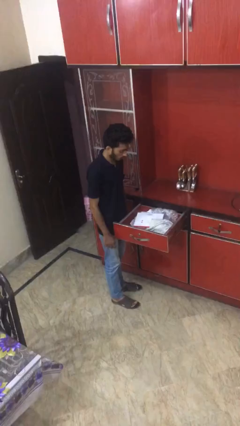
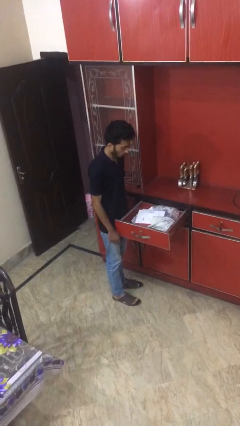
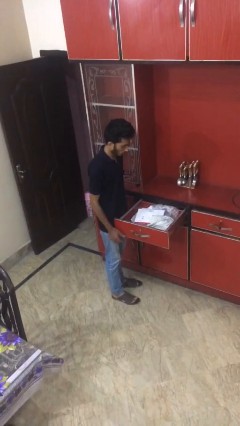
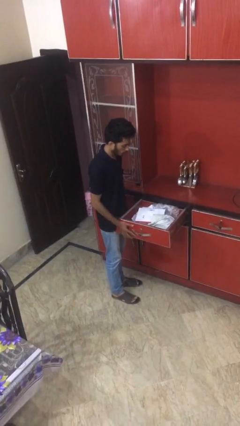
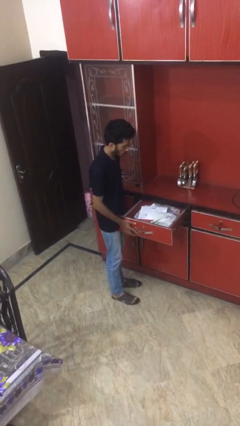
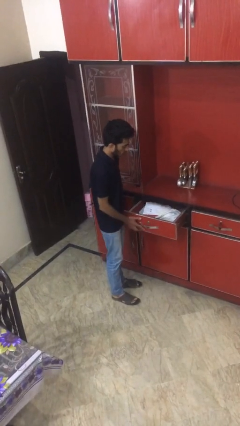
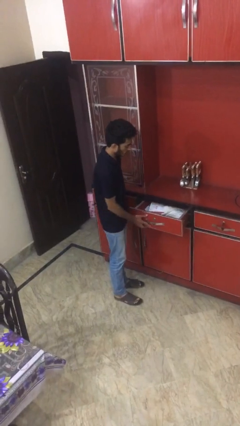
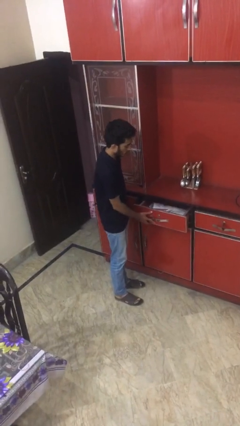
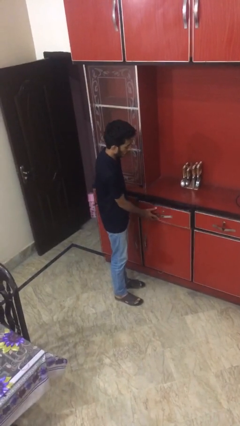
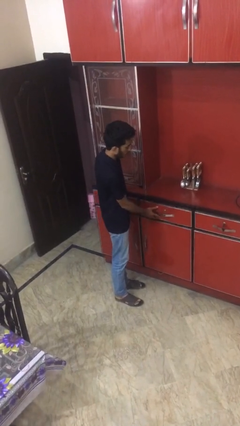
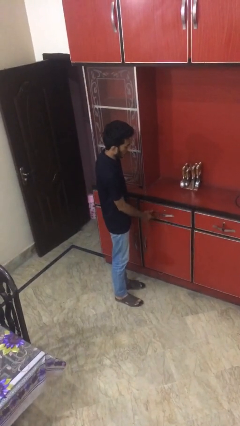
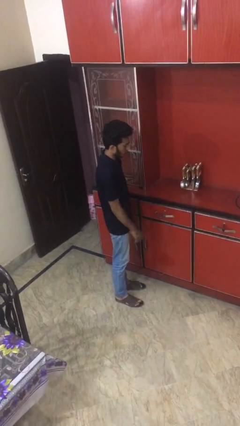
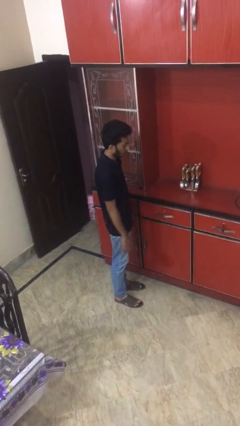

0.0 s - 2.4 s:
person closes kitchen drawer

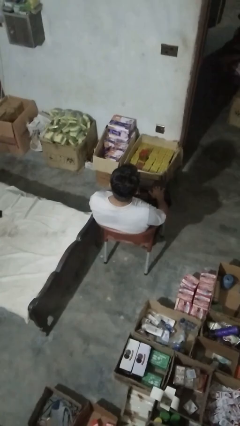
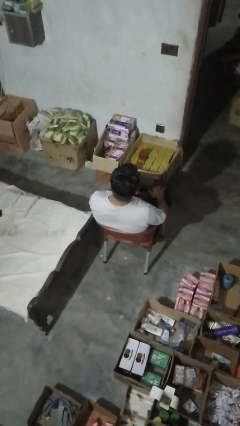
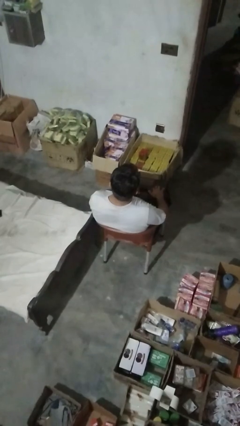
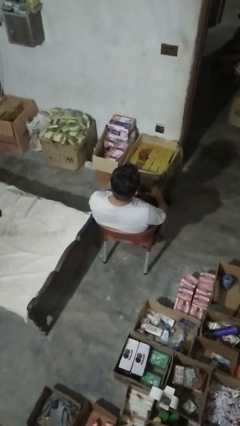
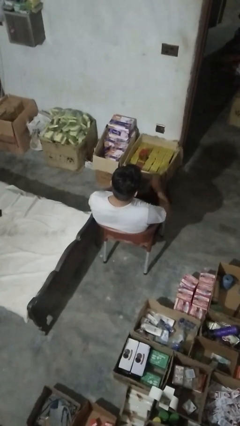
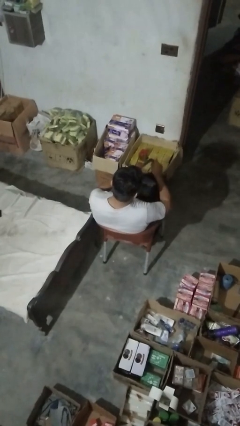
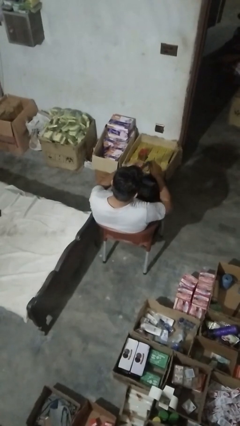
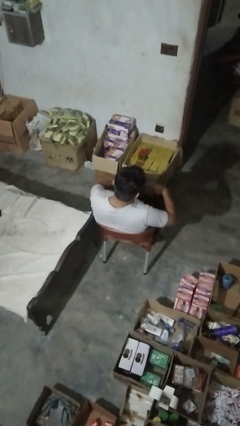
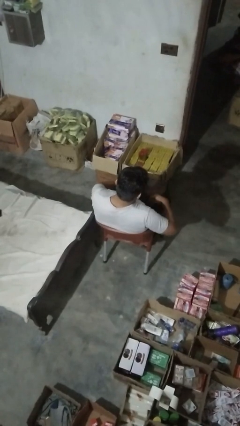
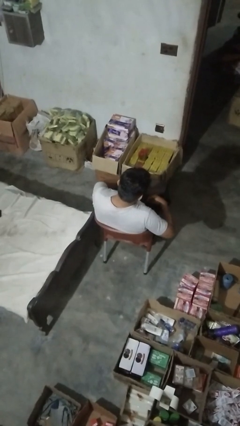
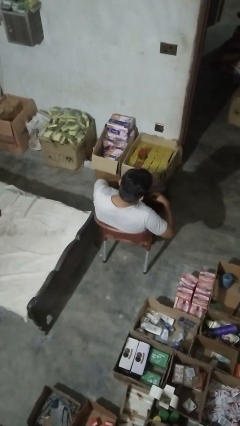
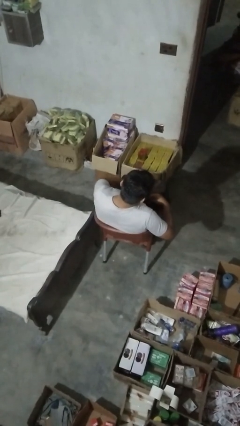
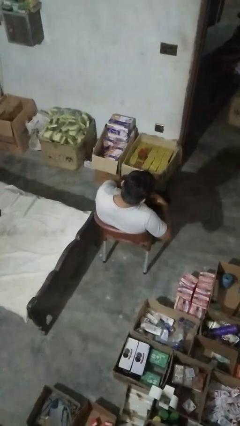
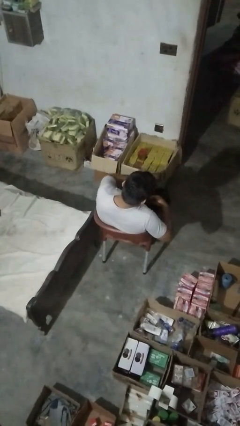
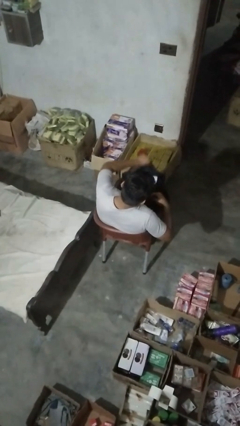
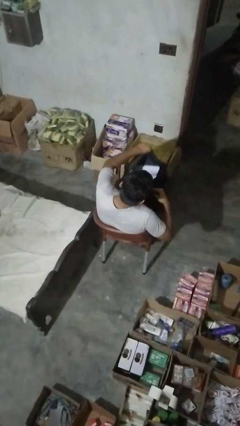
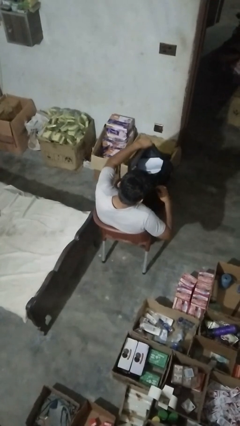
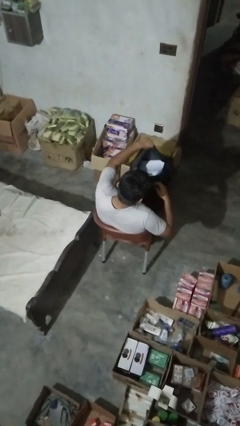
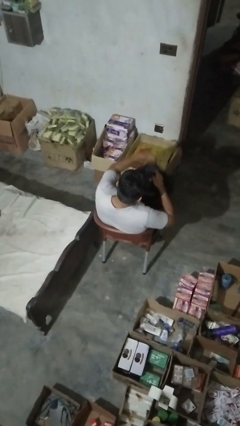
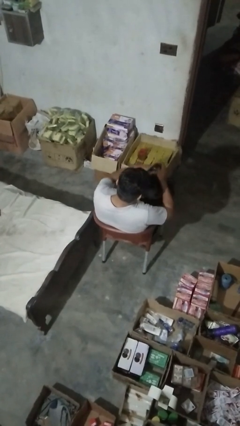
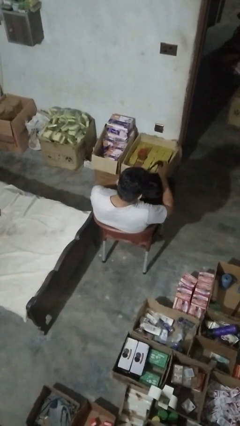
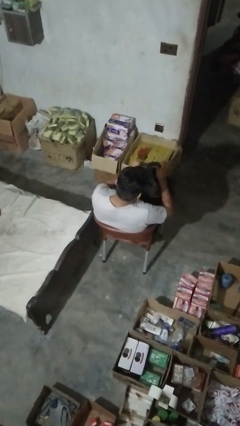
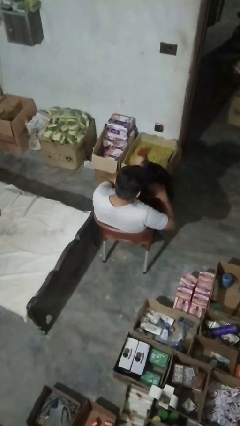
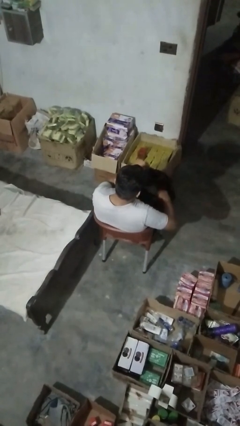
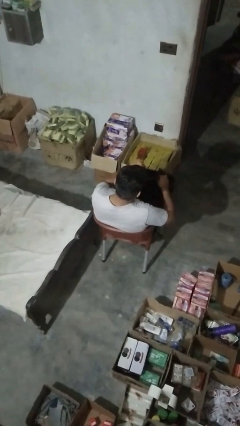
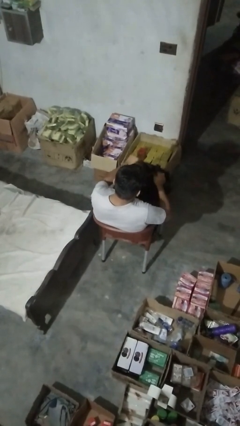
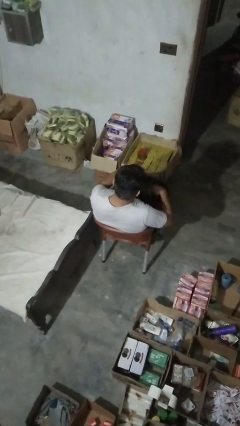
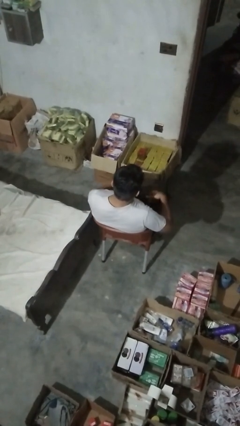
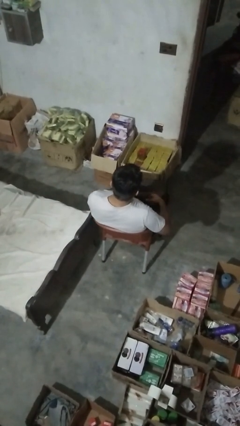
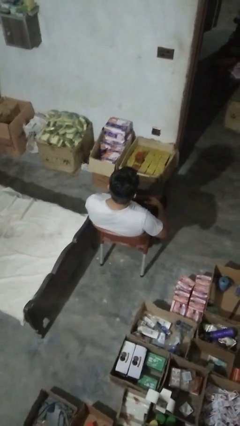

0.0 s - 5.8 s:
person searches in bag

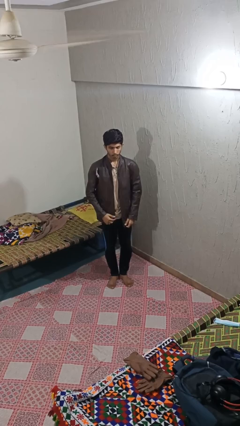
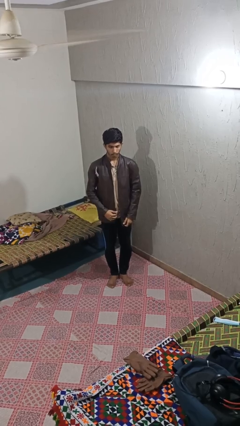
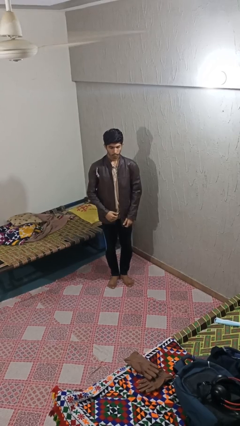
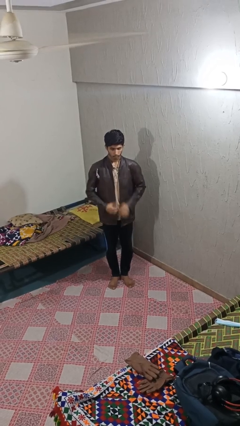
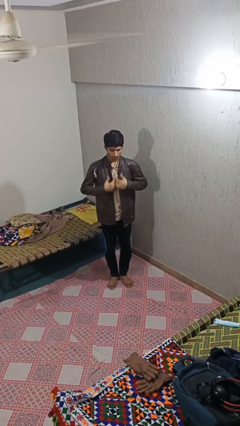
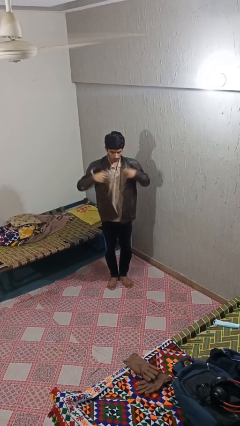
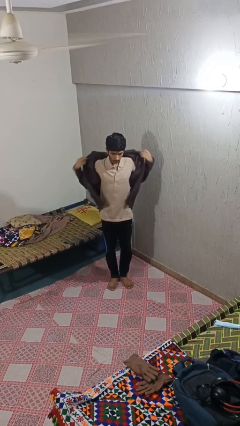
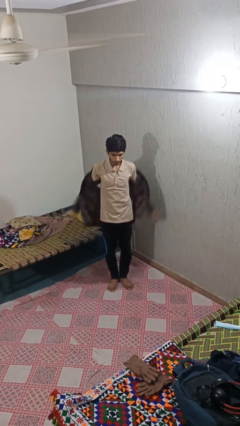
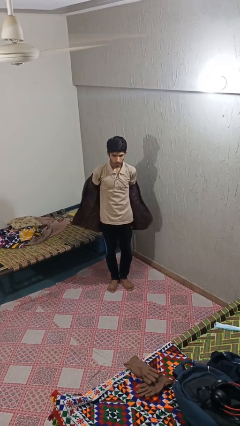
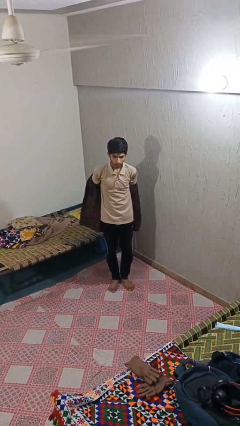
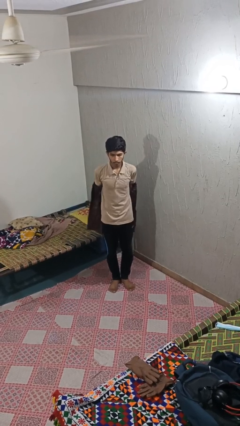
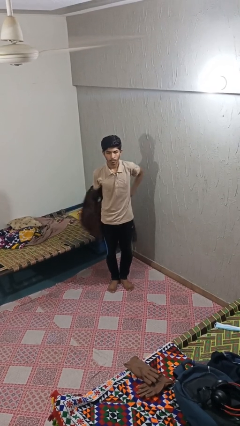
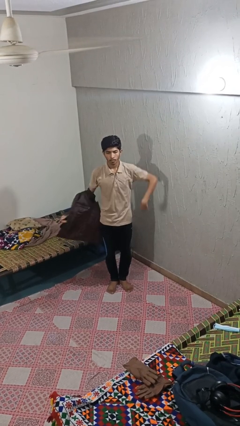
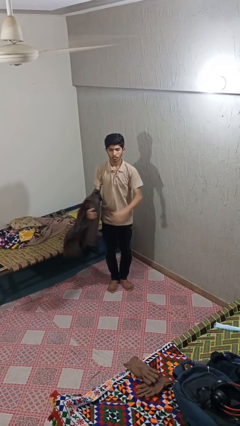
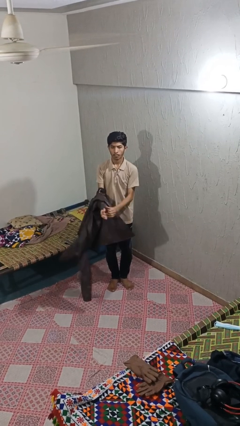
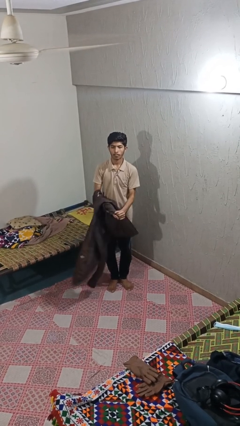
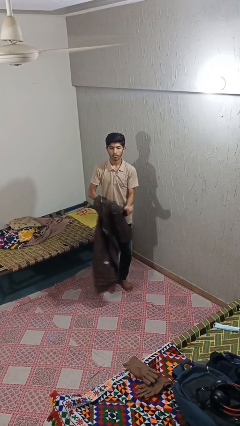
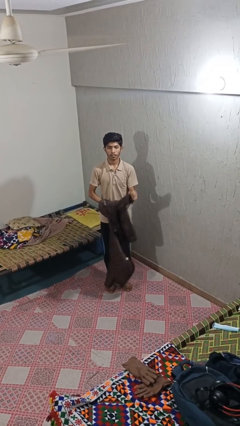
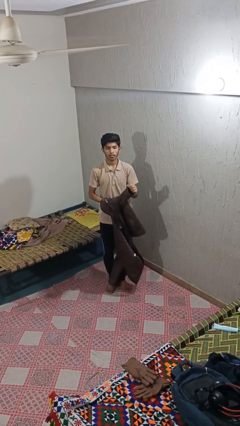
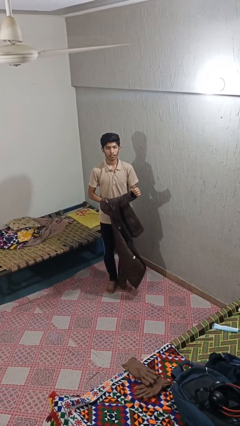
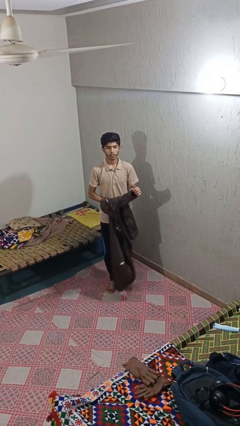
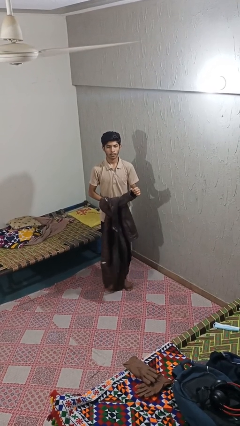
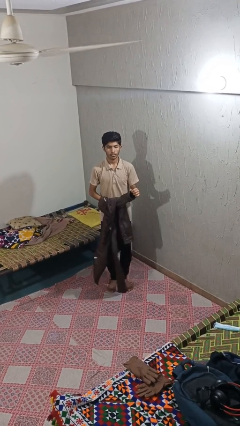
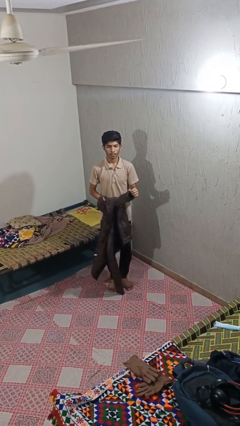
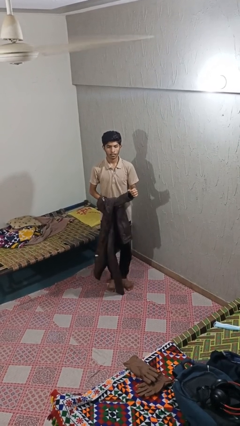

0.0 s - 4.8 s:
person takes off jacket

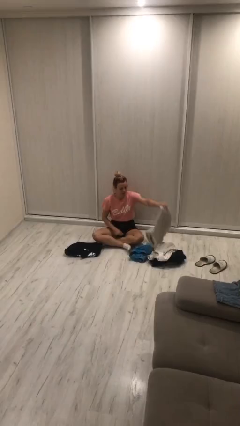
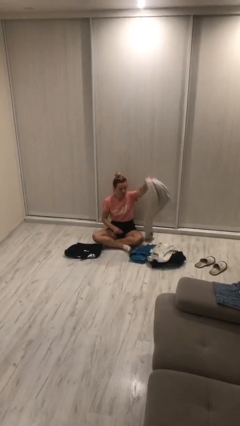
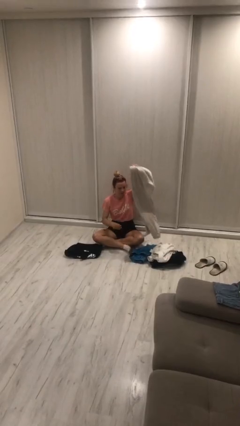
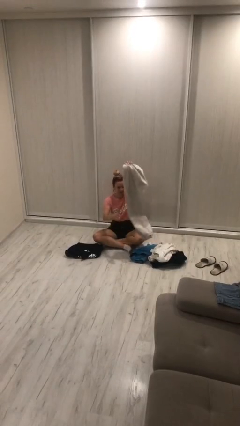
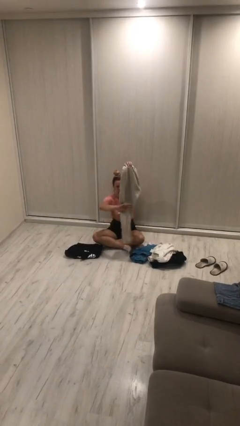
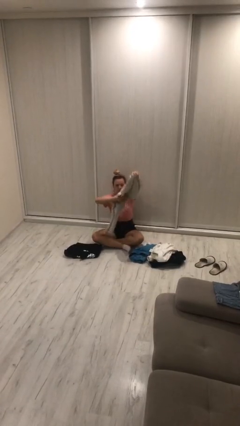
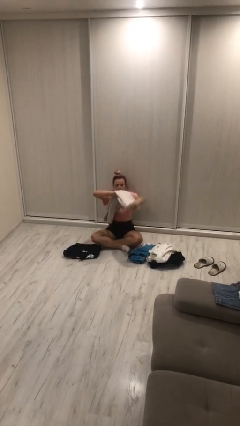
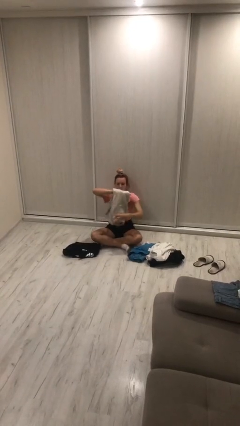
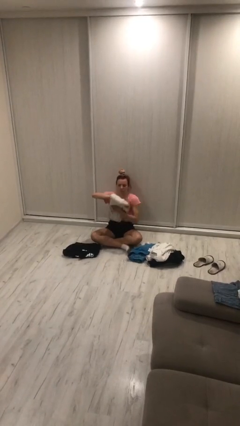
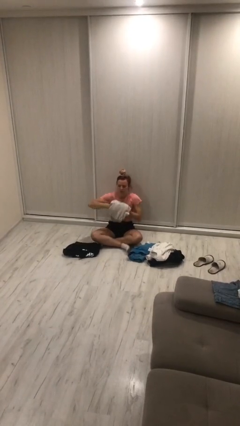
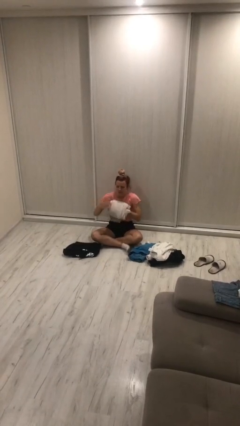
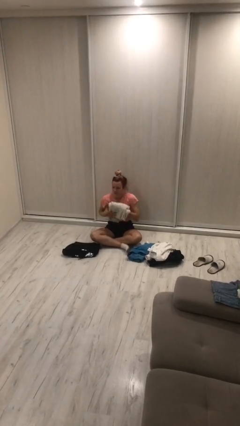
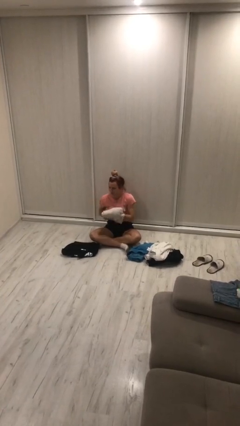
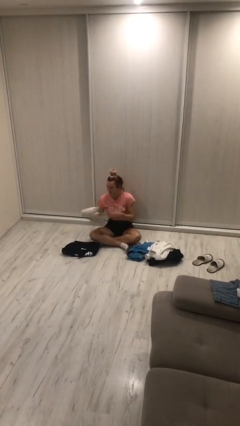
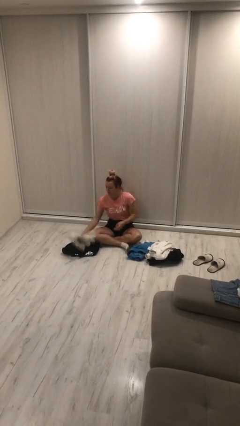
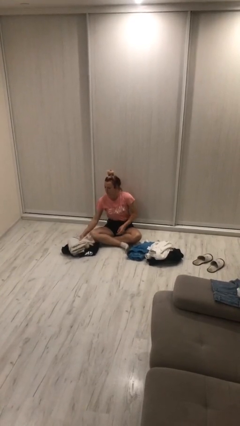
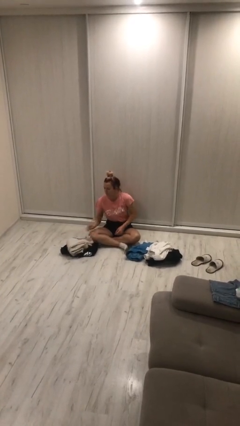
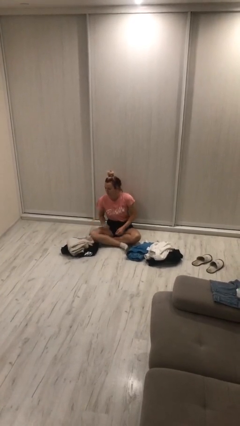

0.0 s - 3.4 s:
person folds pants

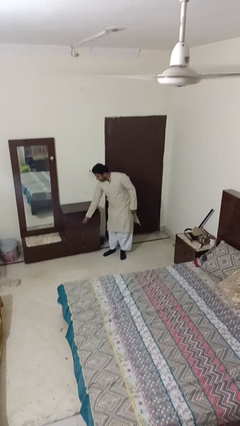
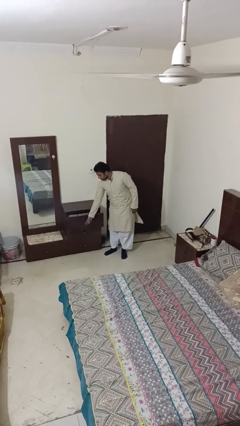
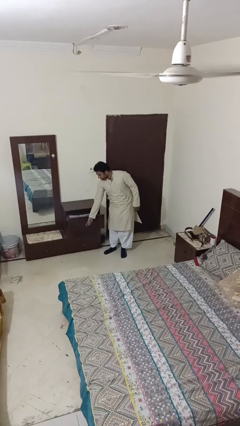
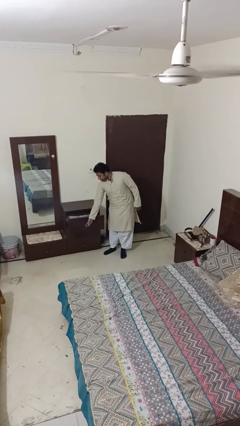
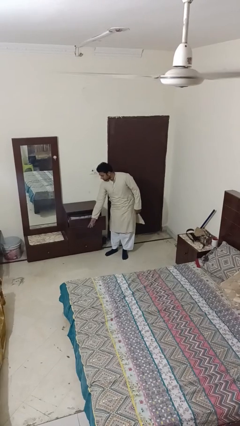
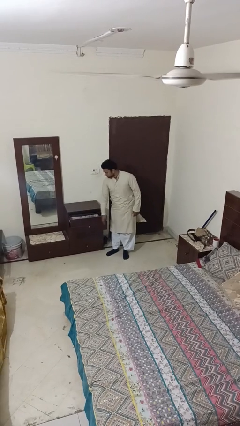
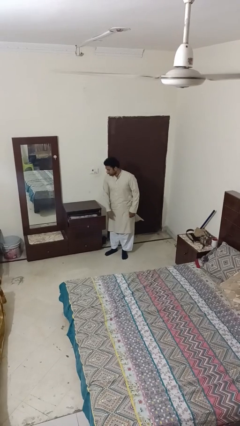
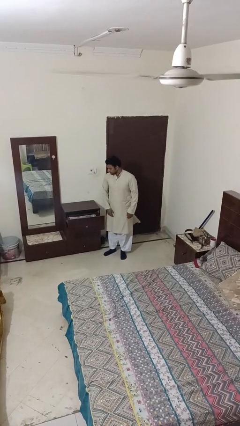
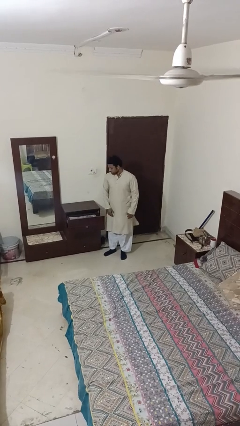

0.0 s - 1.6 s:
person opens dresser drawer
